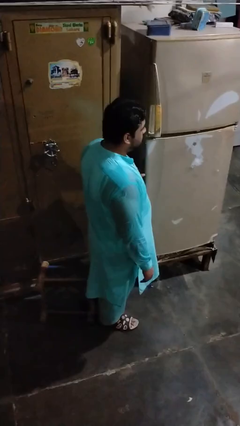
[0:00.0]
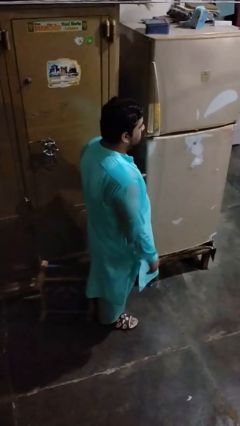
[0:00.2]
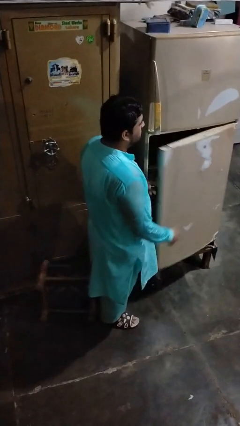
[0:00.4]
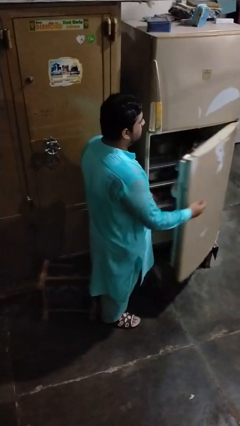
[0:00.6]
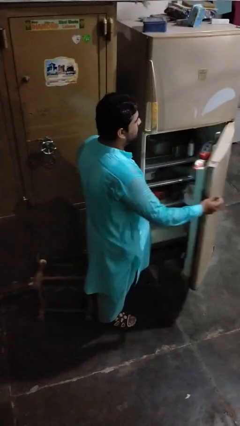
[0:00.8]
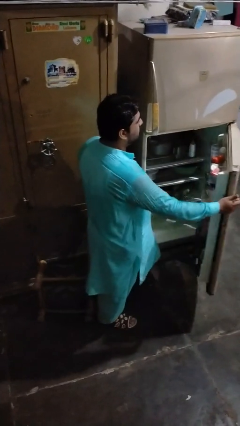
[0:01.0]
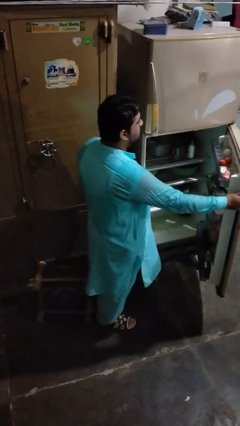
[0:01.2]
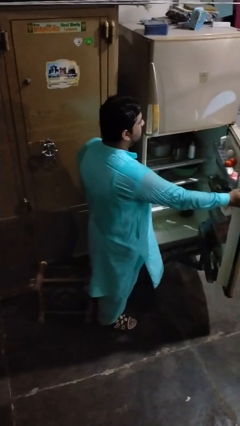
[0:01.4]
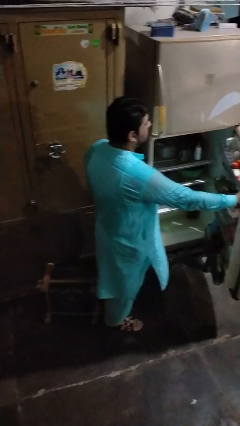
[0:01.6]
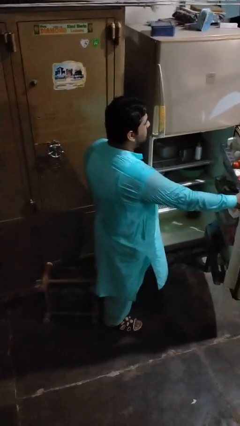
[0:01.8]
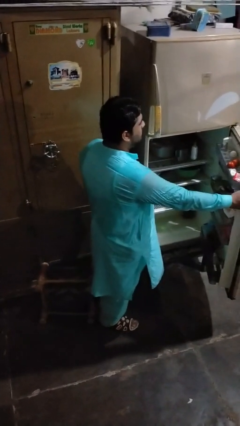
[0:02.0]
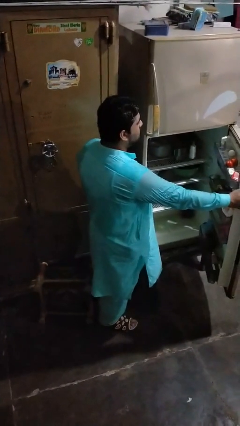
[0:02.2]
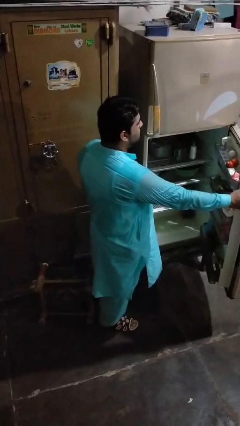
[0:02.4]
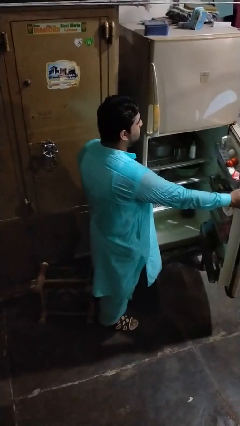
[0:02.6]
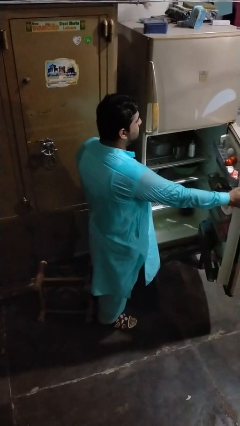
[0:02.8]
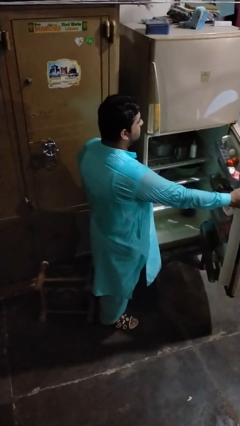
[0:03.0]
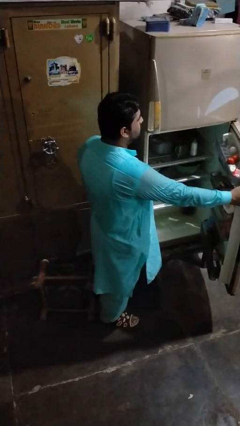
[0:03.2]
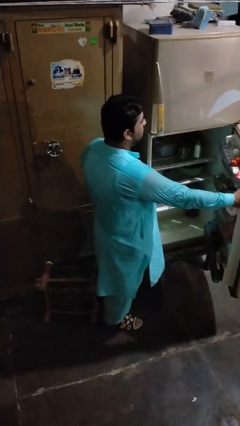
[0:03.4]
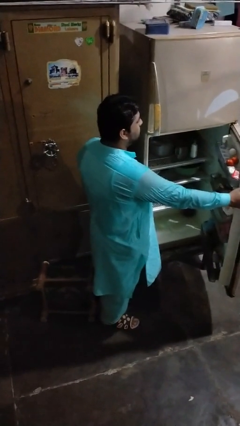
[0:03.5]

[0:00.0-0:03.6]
person opens refrigerator

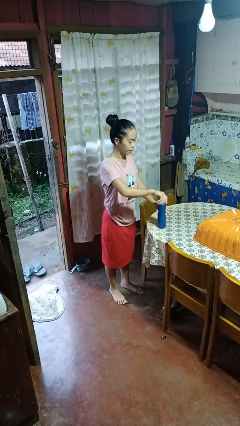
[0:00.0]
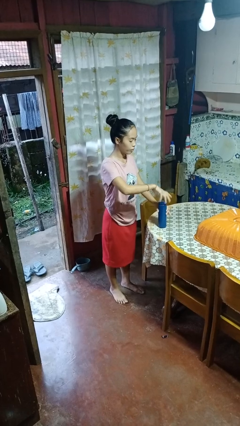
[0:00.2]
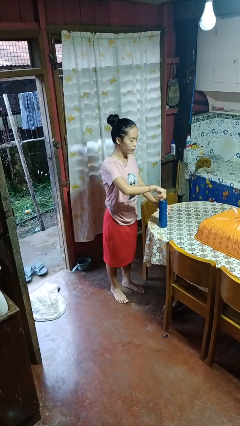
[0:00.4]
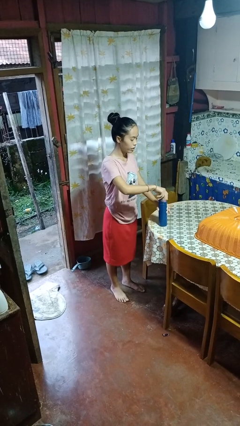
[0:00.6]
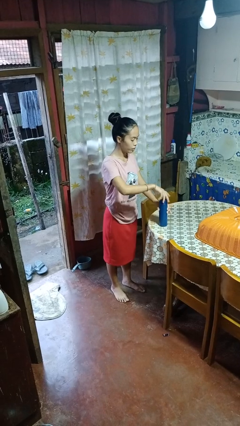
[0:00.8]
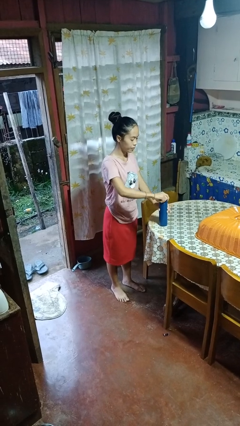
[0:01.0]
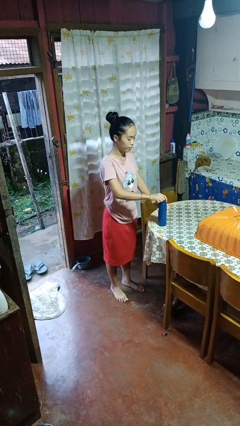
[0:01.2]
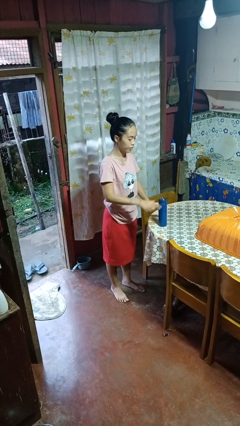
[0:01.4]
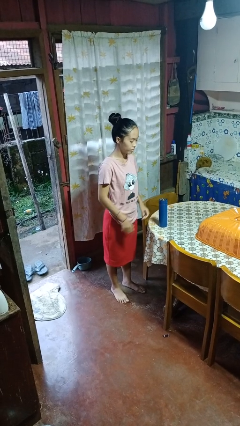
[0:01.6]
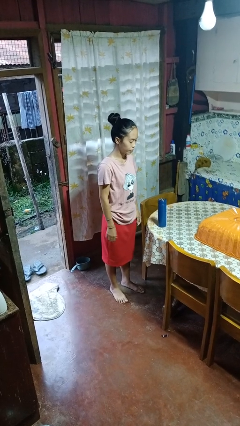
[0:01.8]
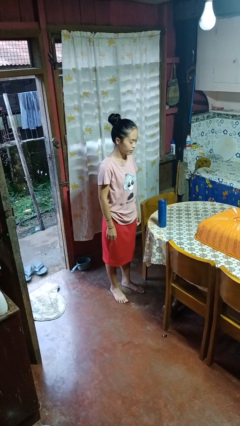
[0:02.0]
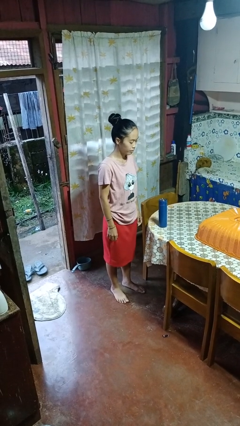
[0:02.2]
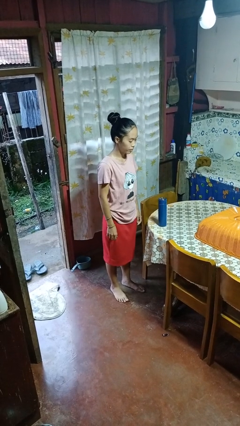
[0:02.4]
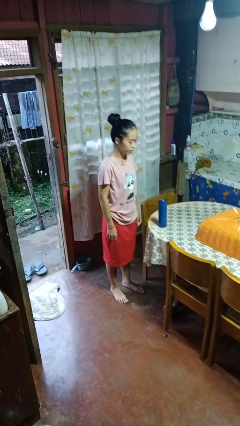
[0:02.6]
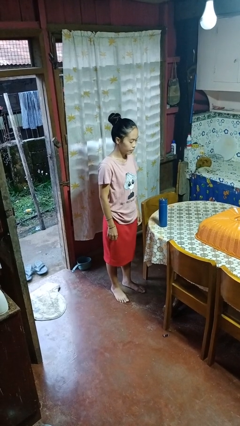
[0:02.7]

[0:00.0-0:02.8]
person closes jar

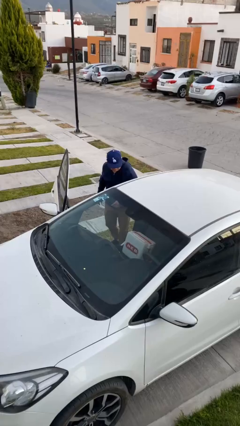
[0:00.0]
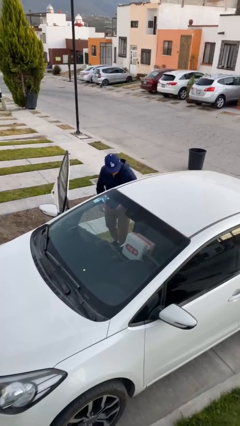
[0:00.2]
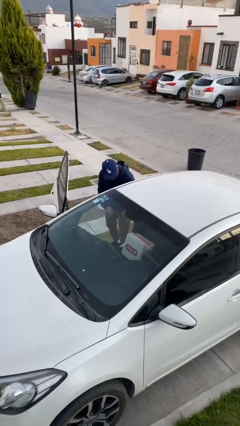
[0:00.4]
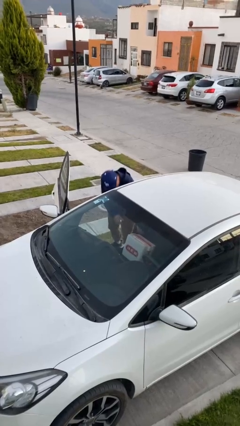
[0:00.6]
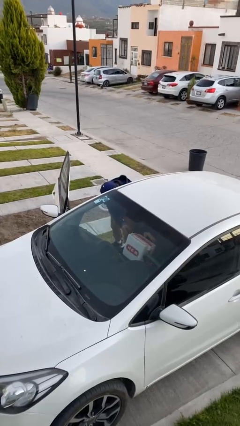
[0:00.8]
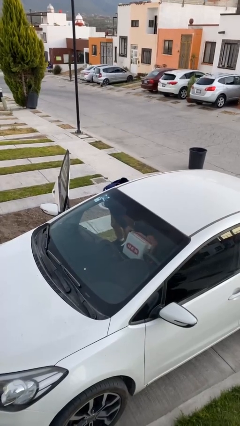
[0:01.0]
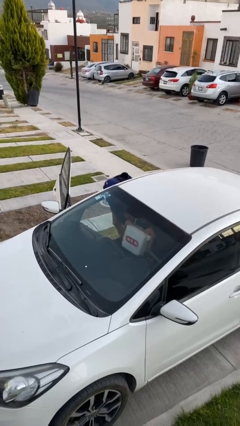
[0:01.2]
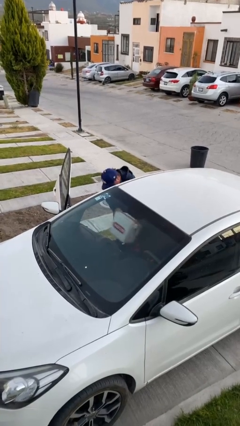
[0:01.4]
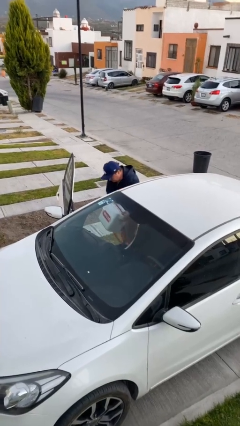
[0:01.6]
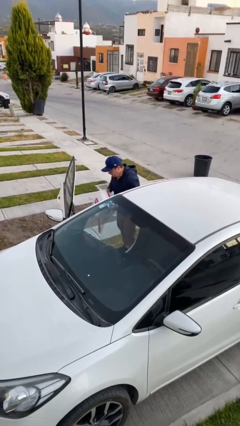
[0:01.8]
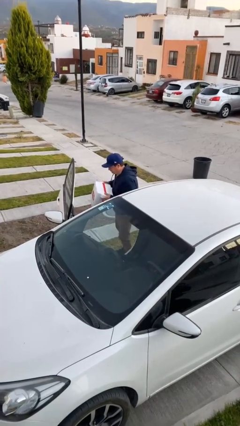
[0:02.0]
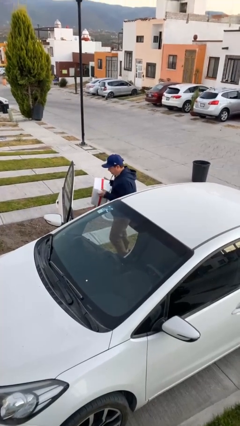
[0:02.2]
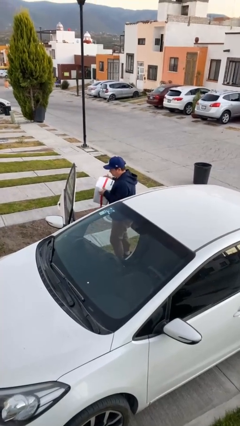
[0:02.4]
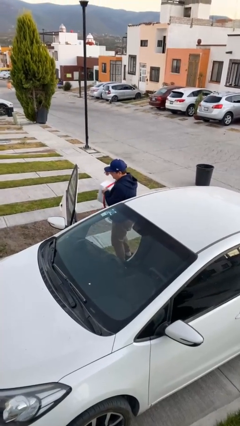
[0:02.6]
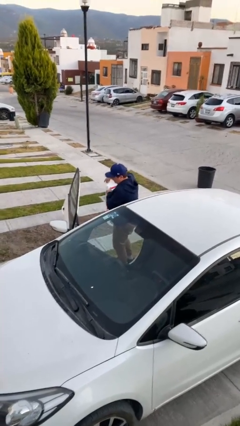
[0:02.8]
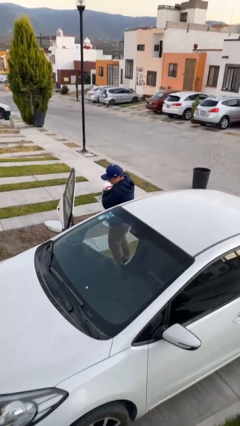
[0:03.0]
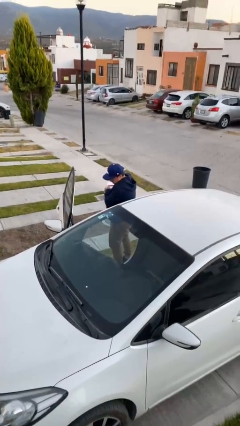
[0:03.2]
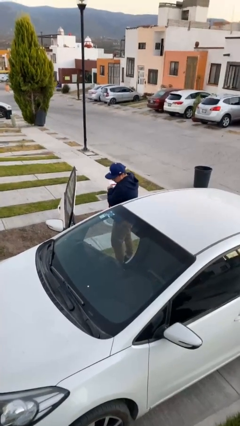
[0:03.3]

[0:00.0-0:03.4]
person unloads car

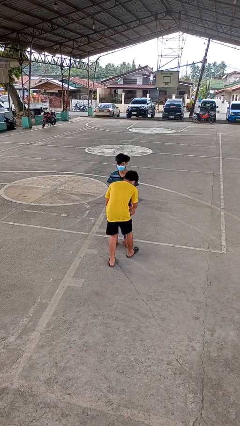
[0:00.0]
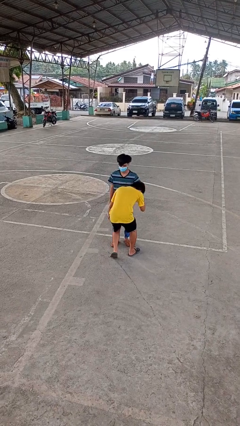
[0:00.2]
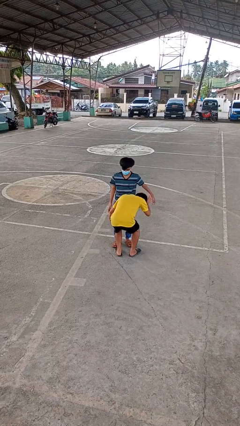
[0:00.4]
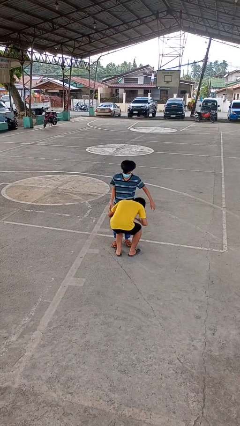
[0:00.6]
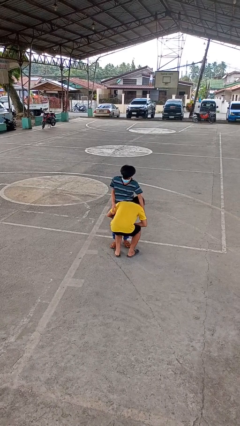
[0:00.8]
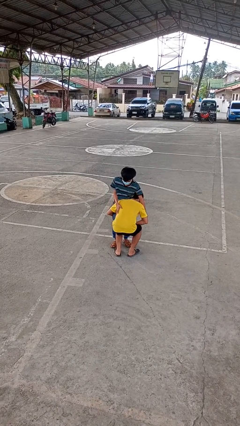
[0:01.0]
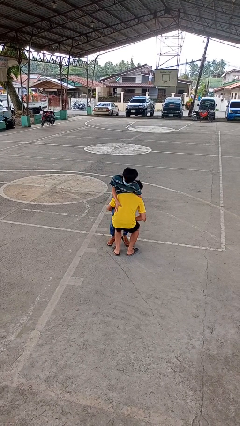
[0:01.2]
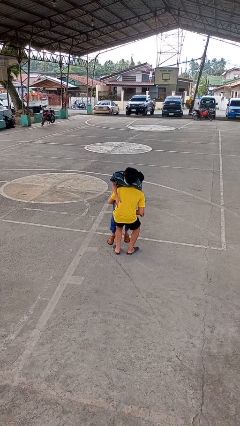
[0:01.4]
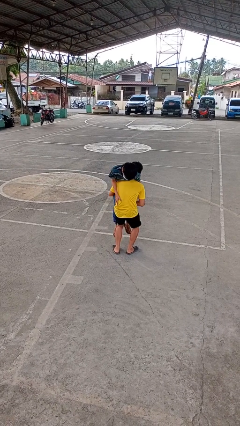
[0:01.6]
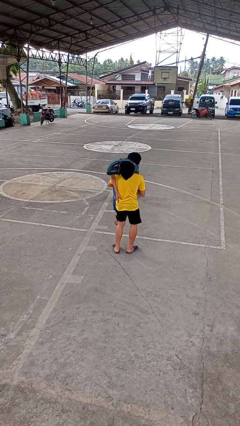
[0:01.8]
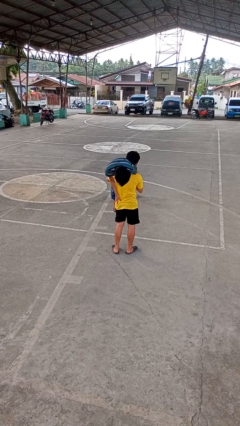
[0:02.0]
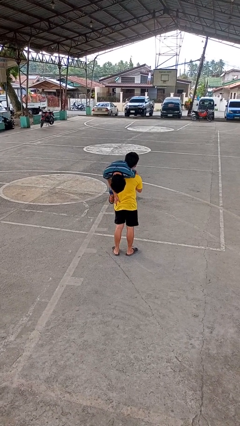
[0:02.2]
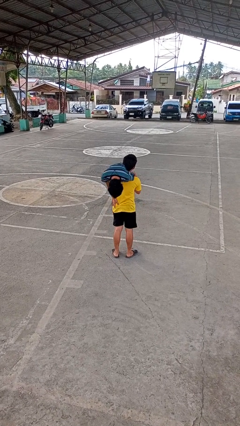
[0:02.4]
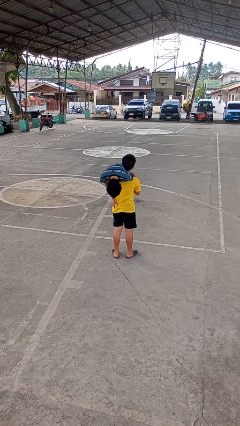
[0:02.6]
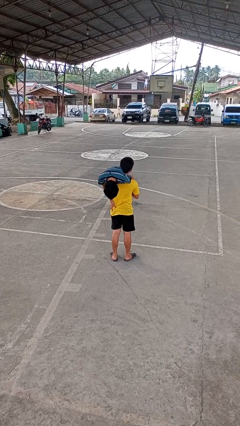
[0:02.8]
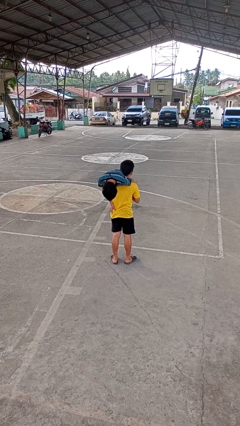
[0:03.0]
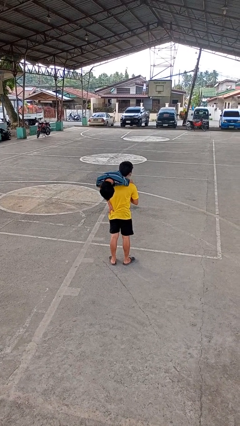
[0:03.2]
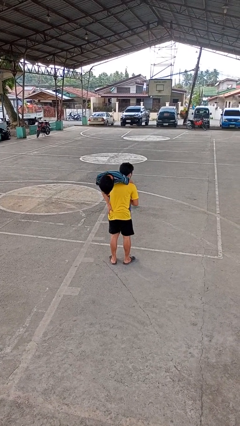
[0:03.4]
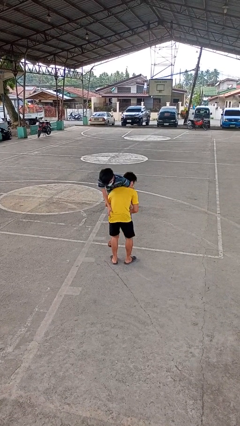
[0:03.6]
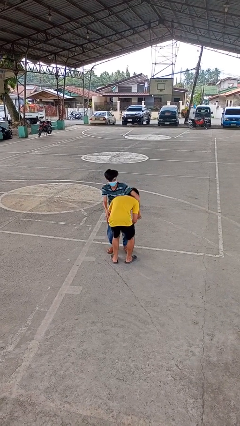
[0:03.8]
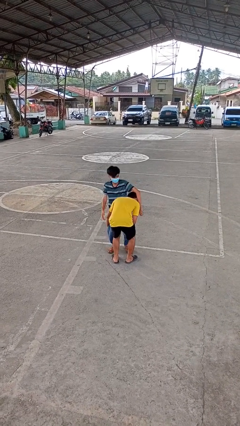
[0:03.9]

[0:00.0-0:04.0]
person carries person over shoulder

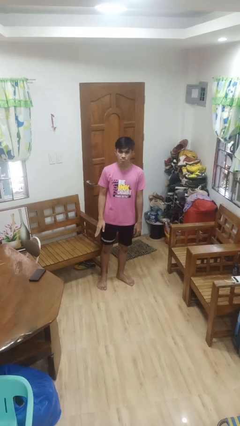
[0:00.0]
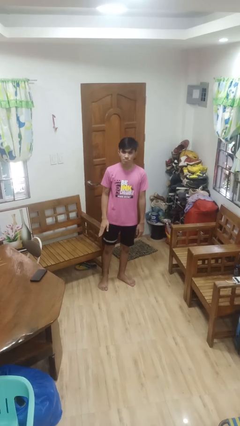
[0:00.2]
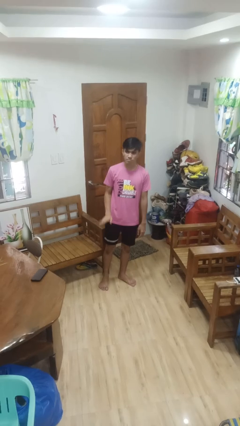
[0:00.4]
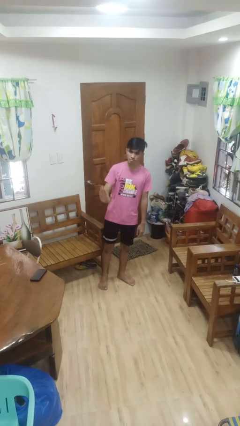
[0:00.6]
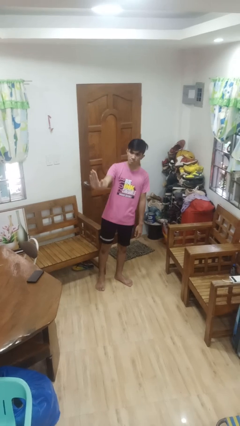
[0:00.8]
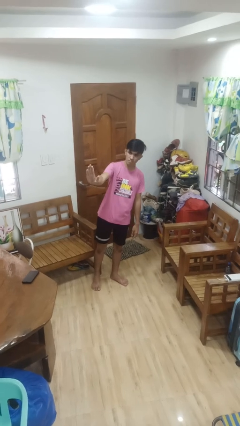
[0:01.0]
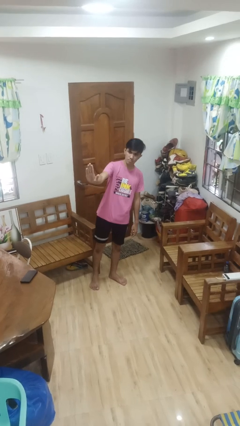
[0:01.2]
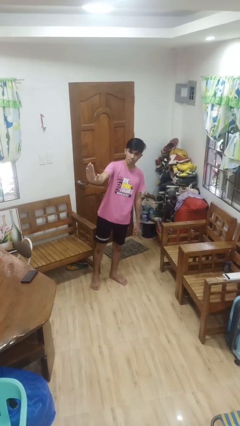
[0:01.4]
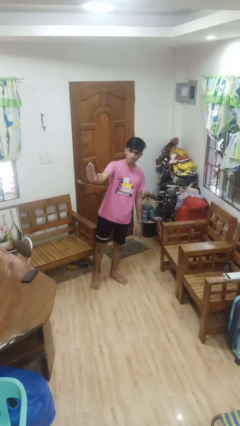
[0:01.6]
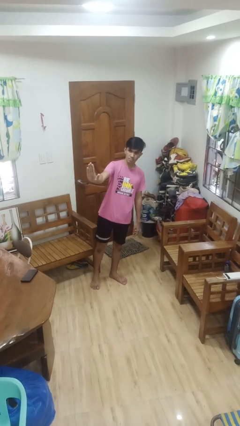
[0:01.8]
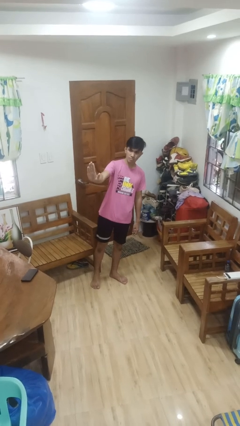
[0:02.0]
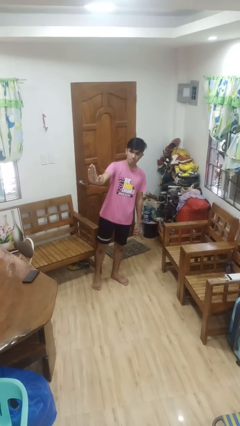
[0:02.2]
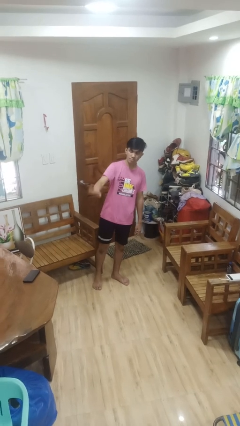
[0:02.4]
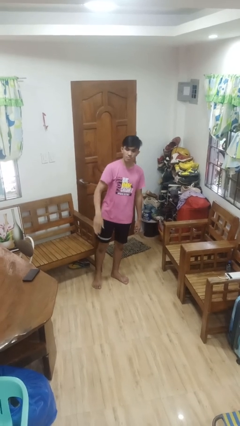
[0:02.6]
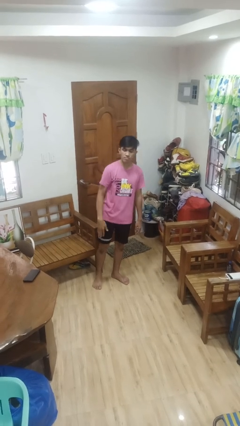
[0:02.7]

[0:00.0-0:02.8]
person gestures stop

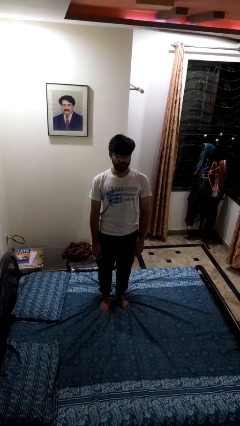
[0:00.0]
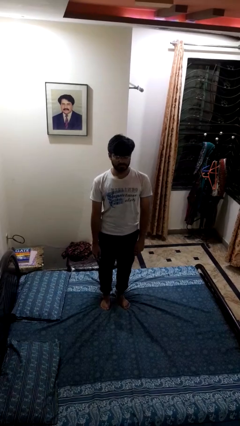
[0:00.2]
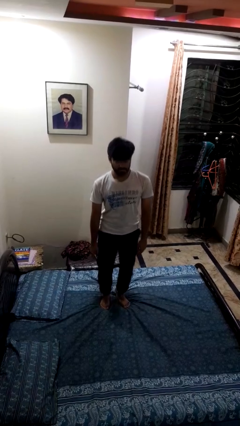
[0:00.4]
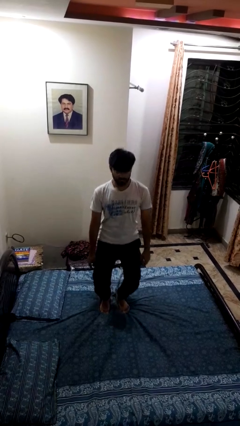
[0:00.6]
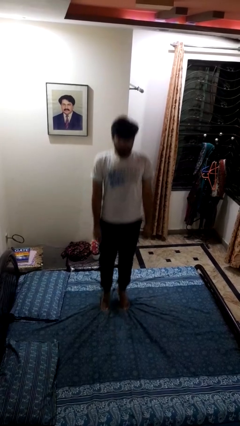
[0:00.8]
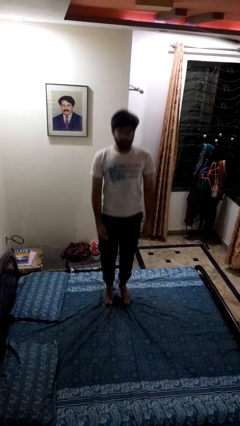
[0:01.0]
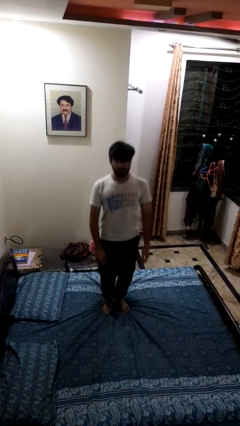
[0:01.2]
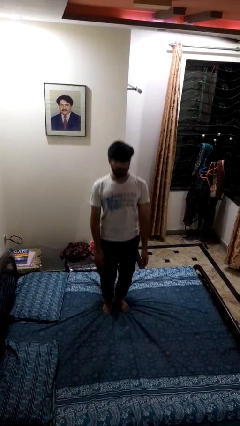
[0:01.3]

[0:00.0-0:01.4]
person jumps on bed
